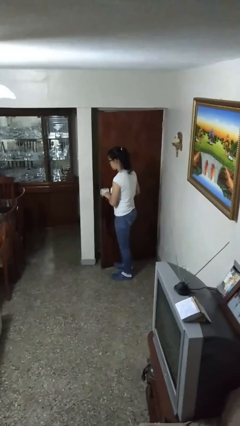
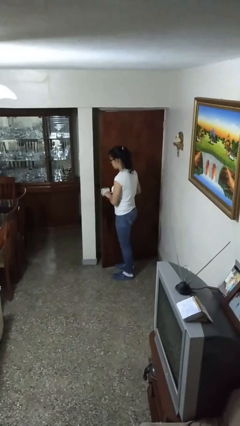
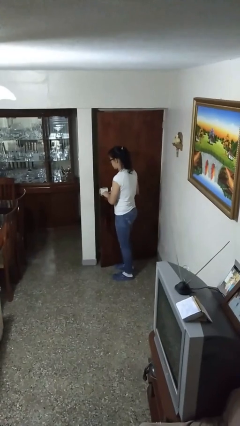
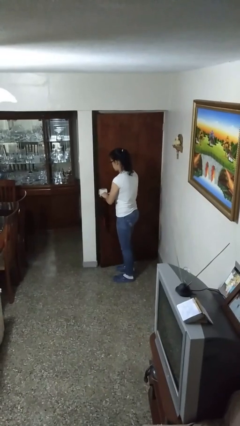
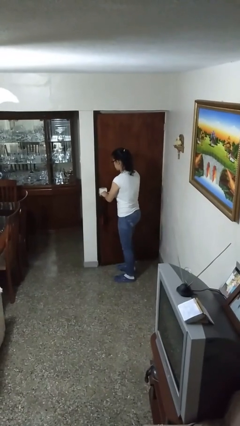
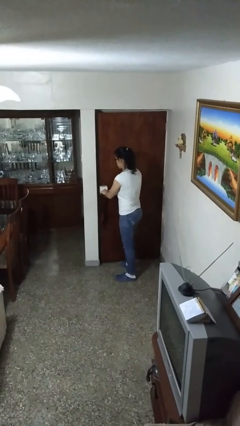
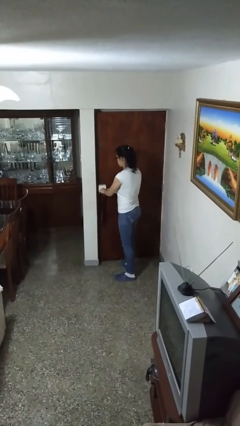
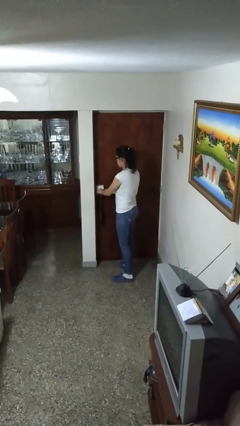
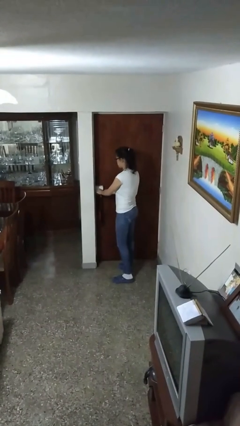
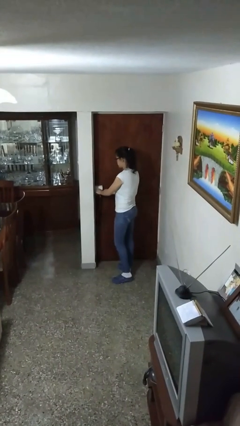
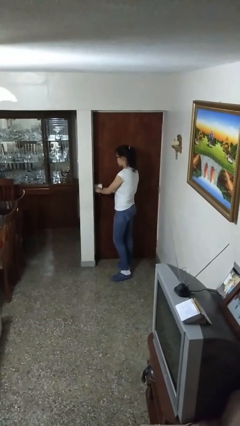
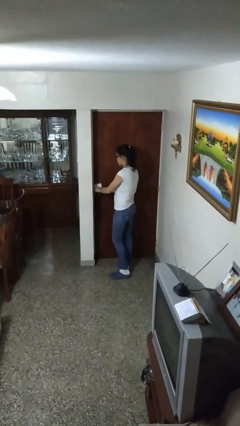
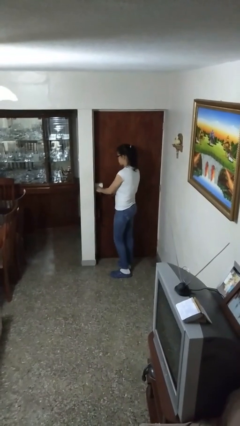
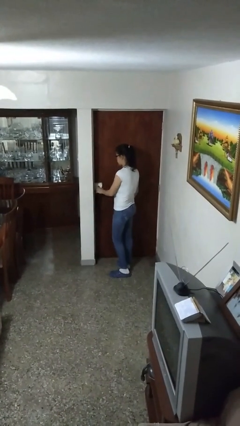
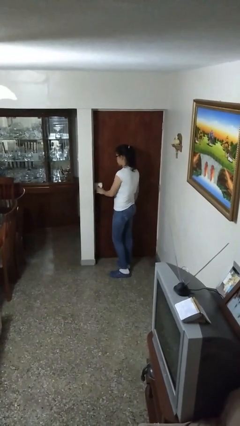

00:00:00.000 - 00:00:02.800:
person closes facility door

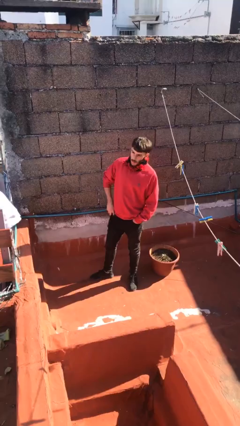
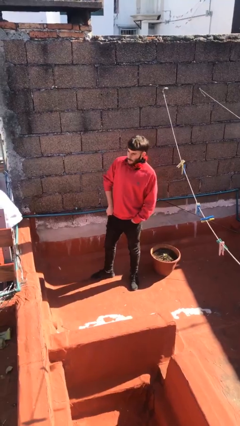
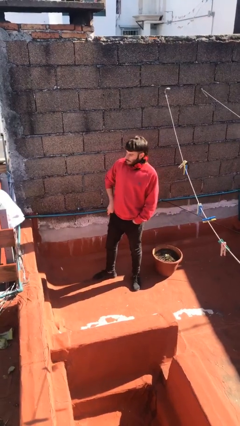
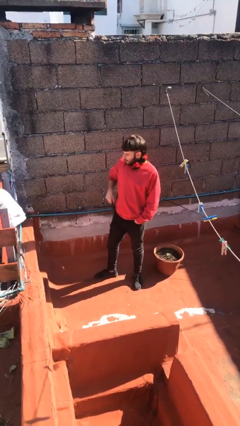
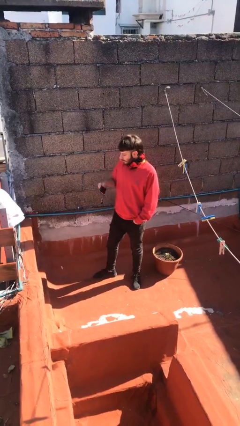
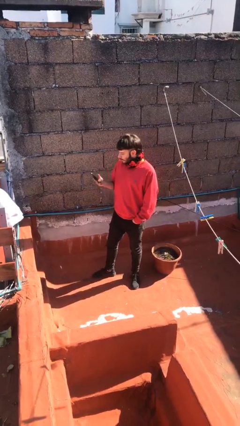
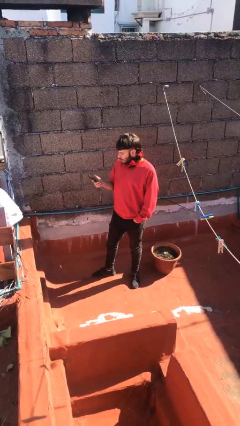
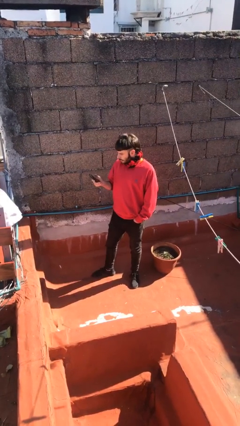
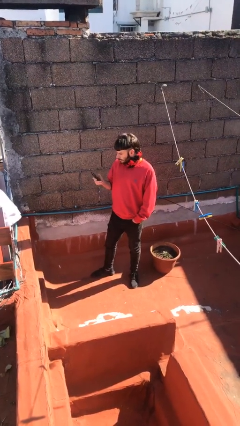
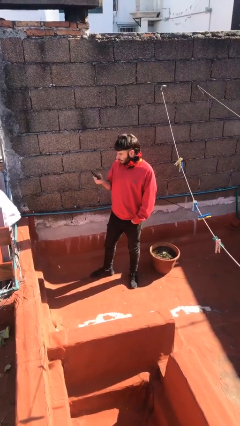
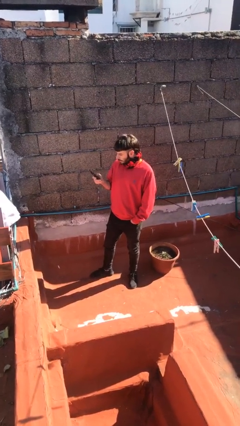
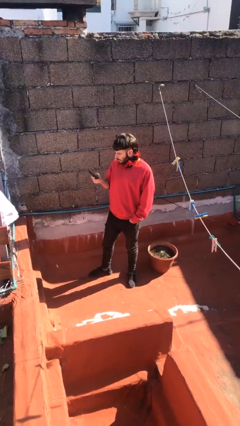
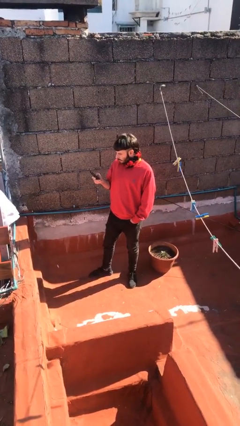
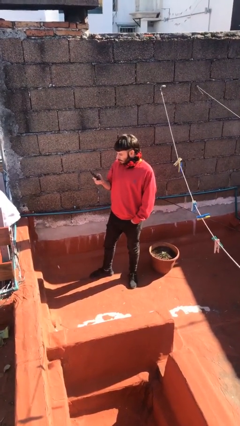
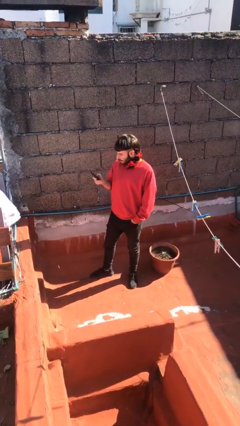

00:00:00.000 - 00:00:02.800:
person takes phone from pocket

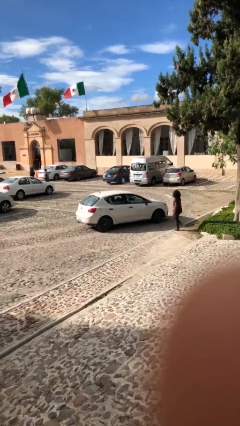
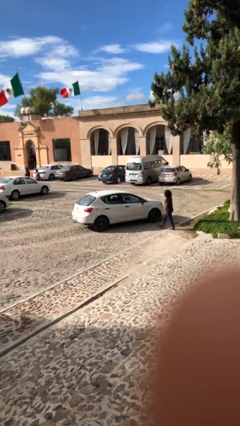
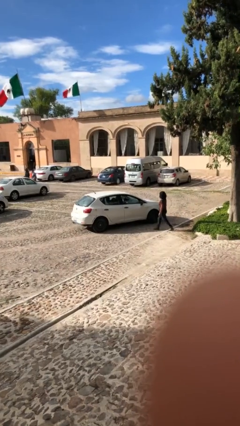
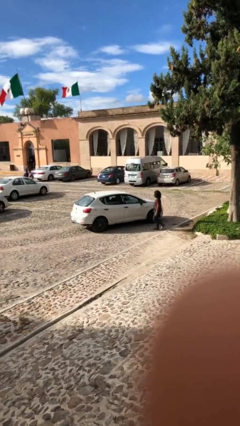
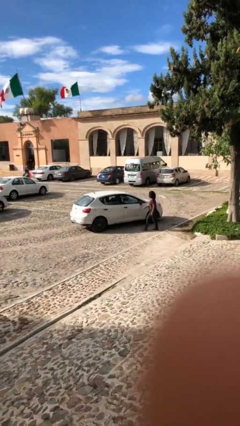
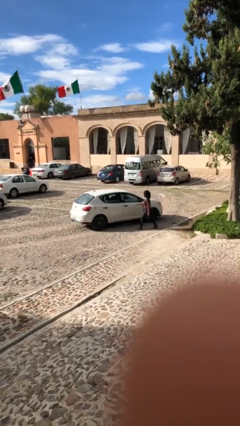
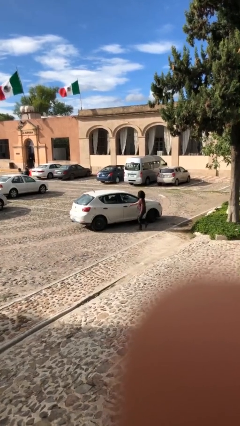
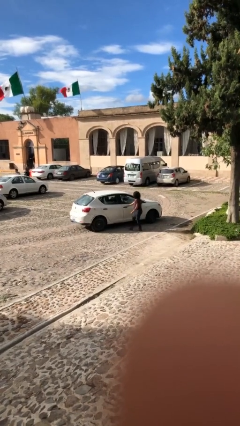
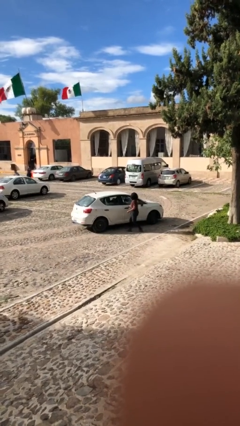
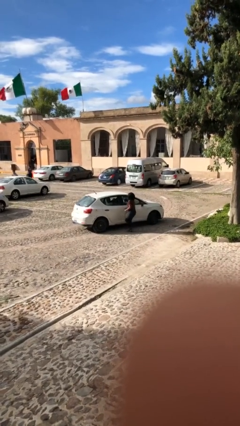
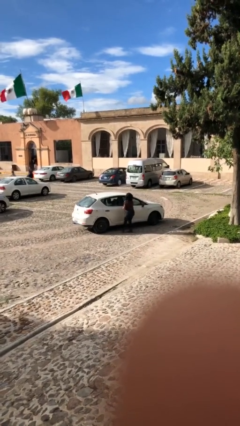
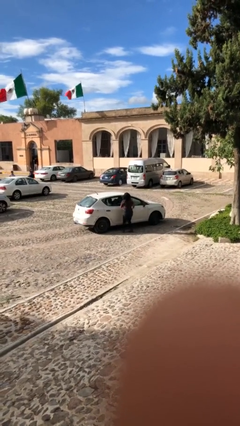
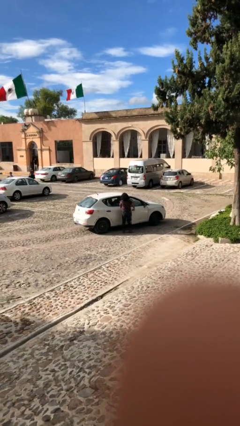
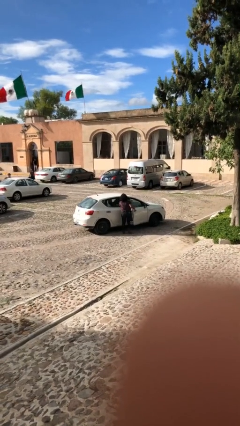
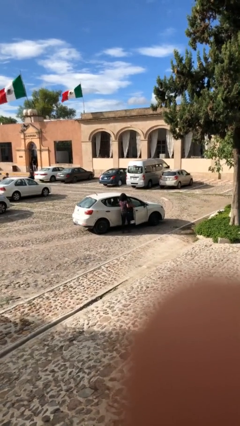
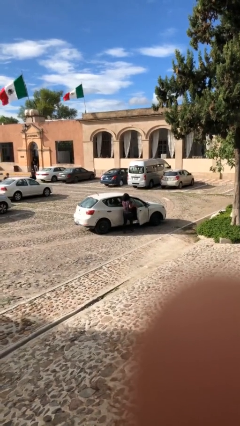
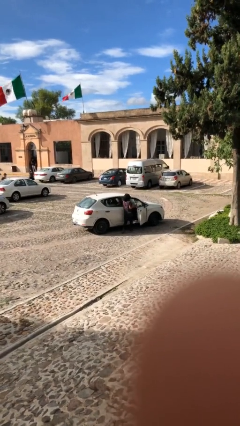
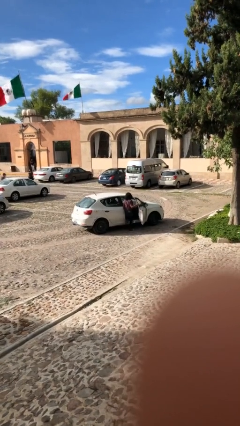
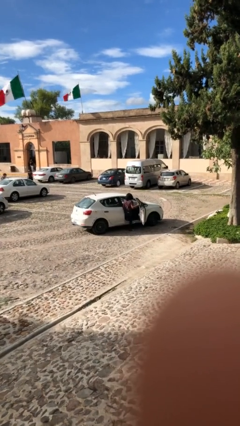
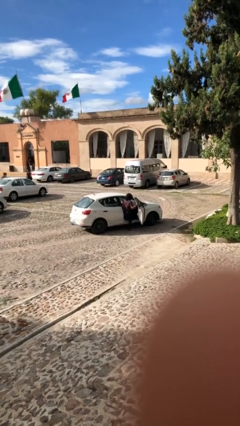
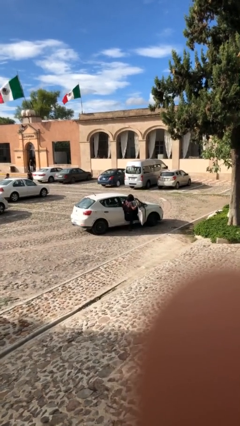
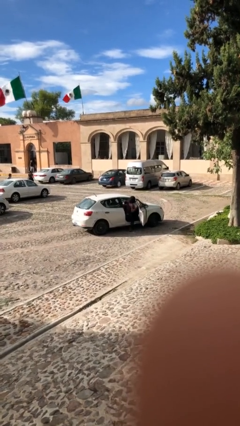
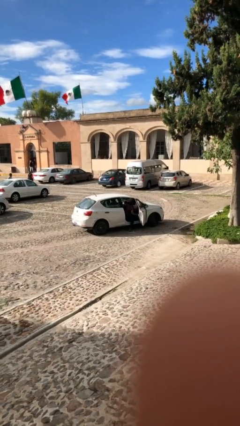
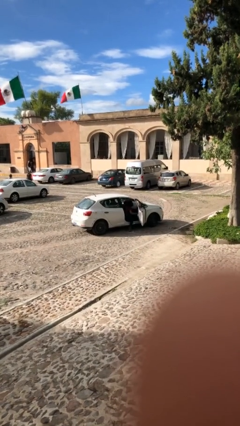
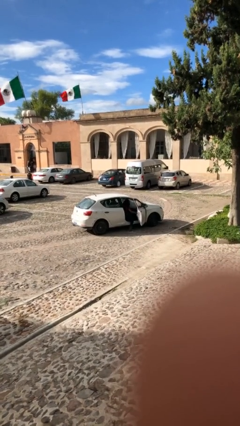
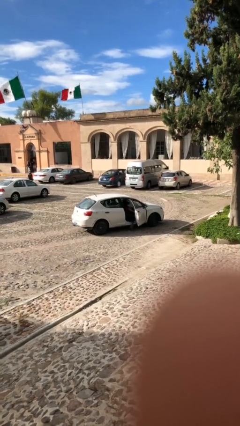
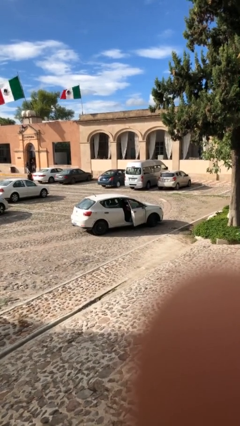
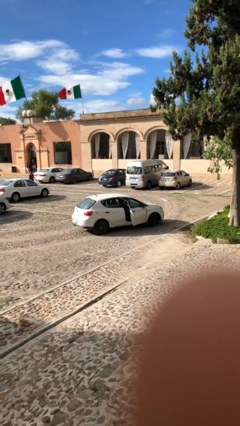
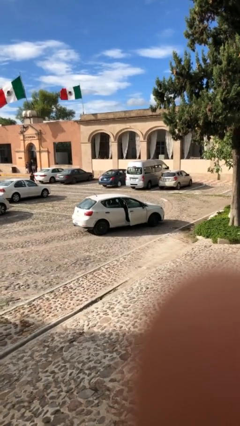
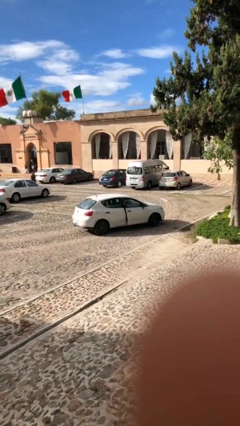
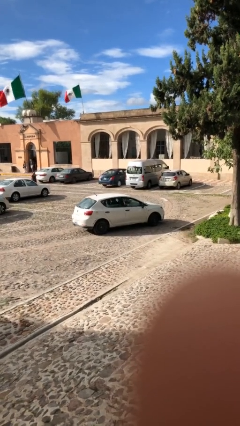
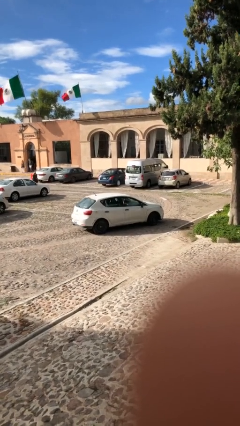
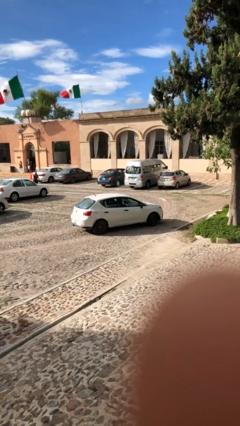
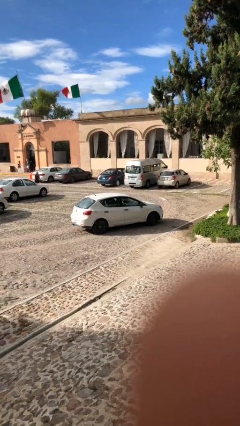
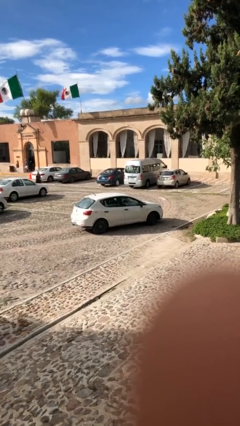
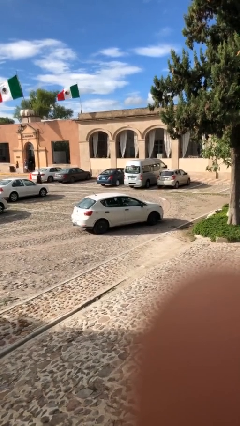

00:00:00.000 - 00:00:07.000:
car picks up person

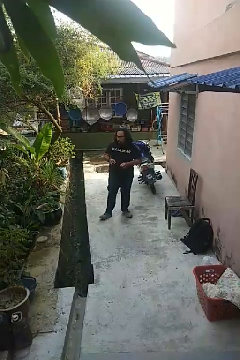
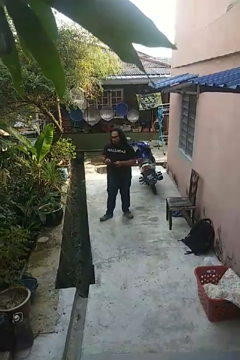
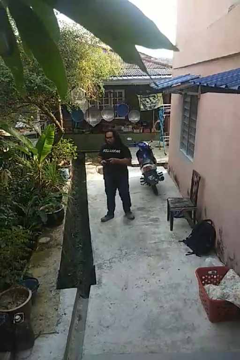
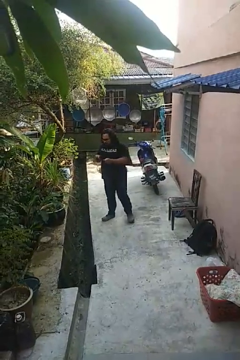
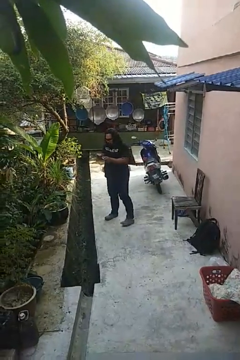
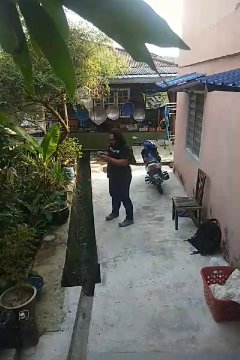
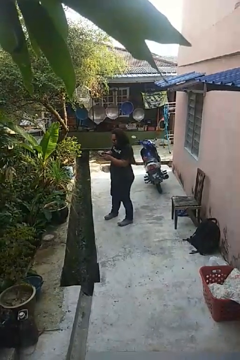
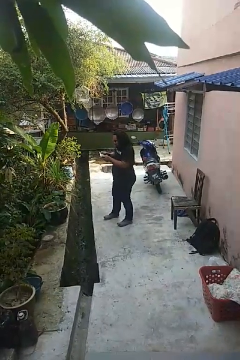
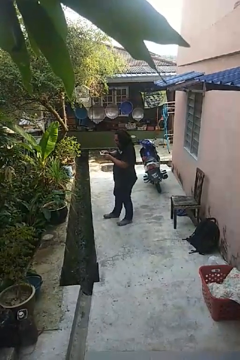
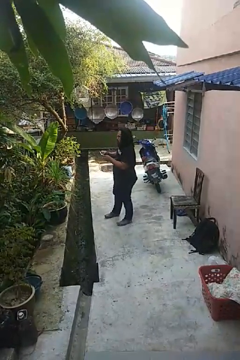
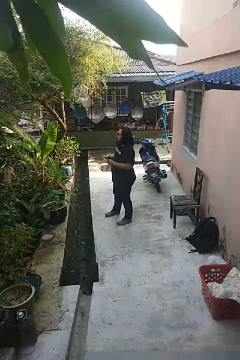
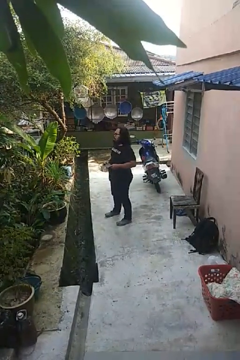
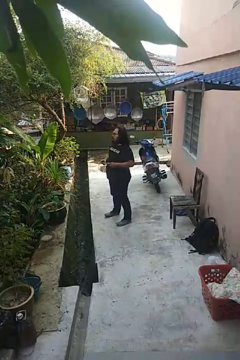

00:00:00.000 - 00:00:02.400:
person interacts with handheld game

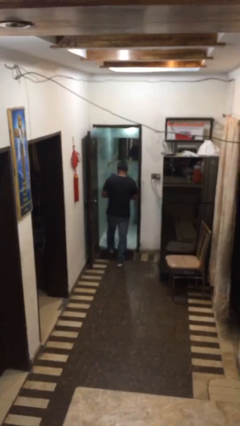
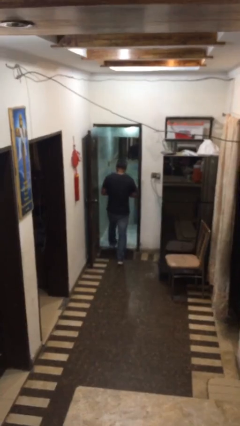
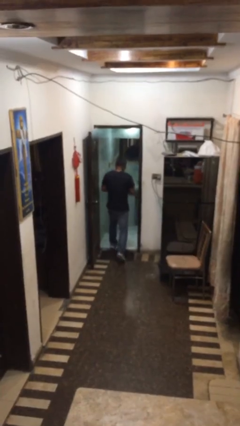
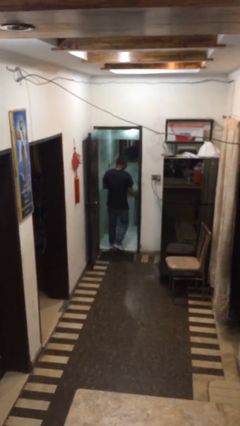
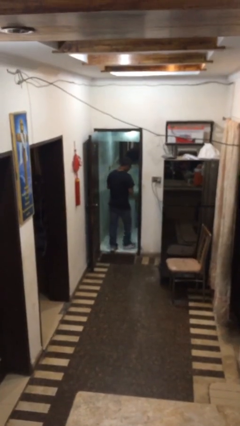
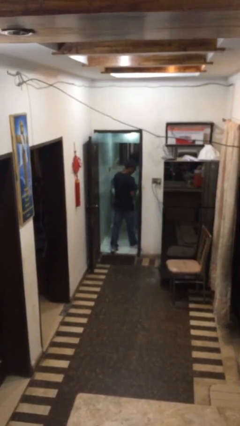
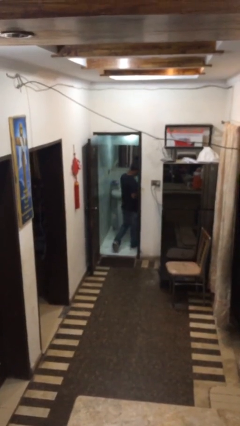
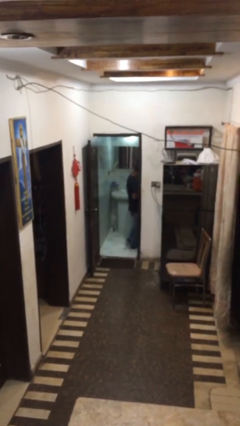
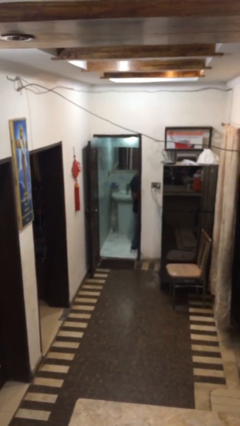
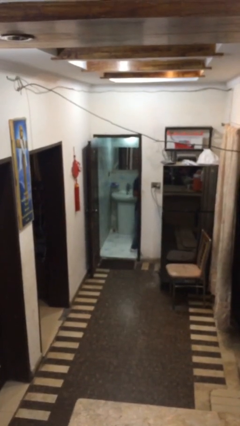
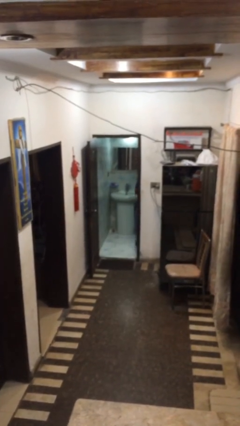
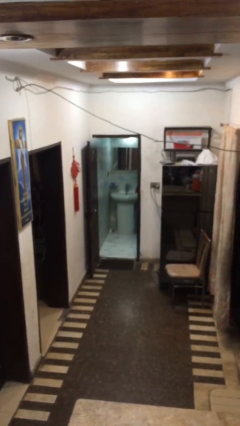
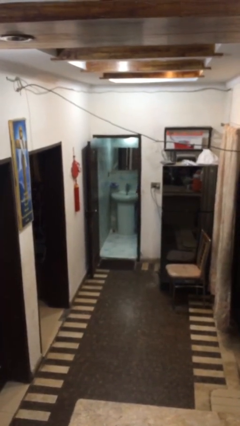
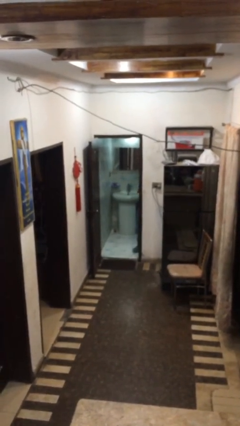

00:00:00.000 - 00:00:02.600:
person exits scene through structure
